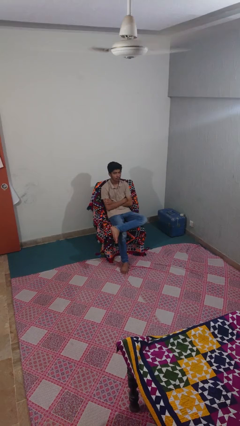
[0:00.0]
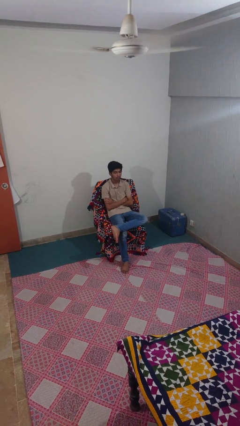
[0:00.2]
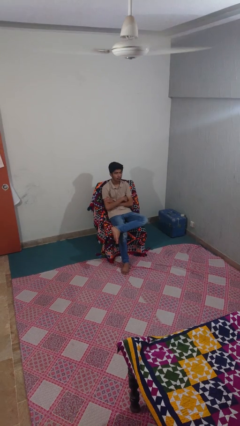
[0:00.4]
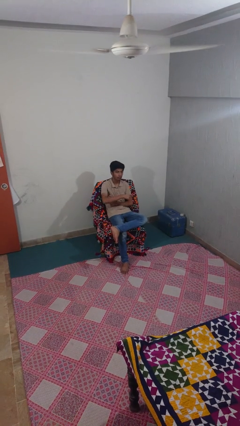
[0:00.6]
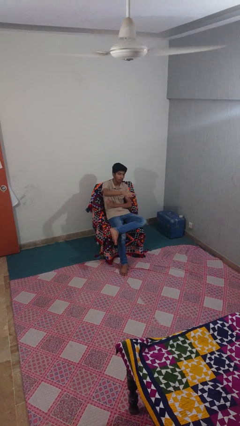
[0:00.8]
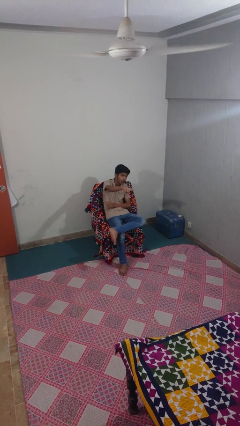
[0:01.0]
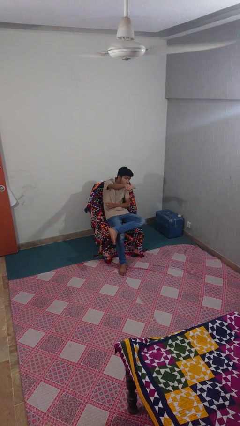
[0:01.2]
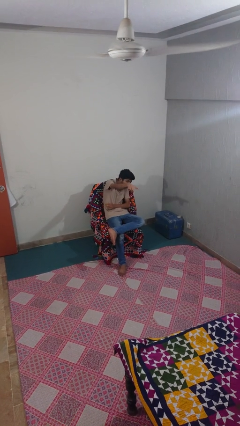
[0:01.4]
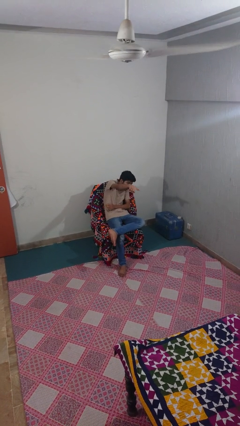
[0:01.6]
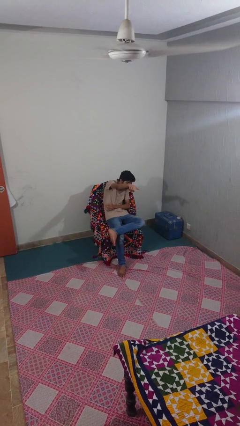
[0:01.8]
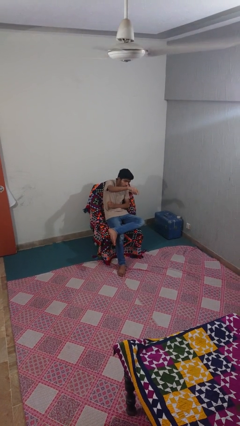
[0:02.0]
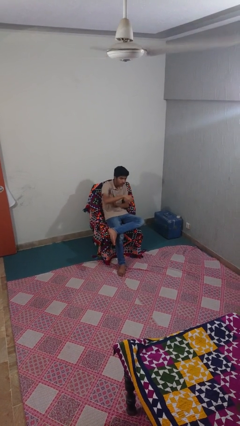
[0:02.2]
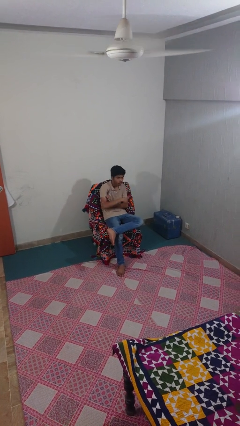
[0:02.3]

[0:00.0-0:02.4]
person points at person

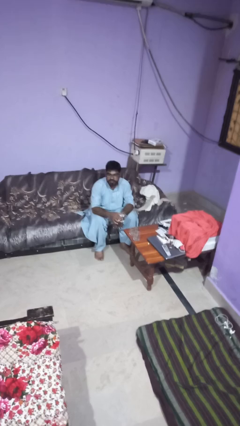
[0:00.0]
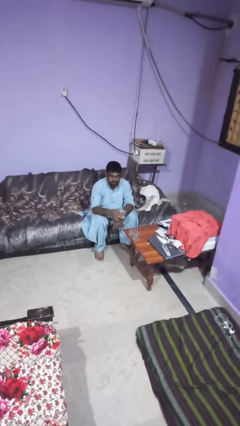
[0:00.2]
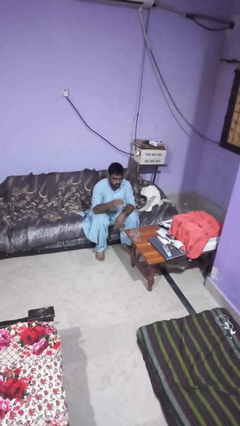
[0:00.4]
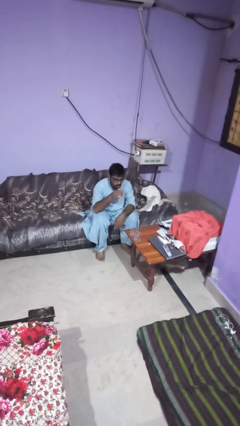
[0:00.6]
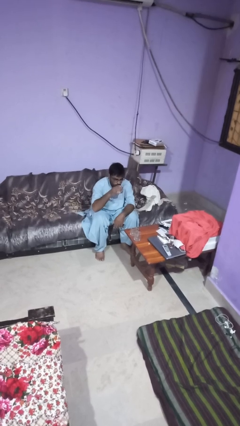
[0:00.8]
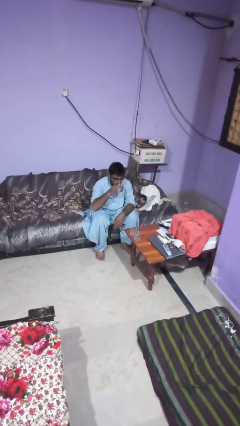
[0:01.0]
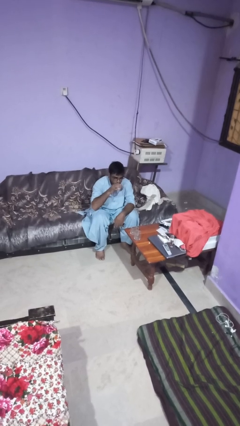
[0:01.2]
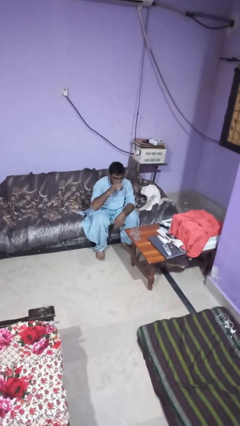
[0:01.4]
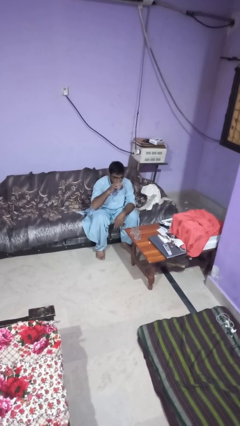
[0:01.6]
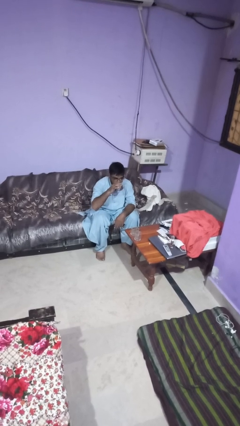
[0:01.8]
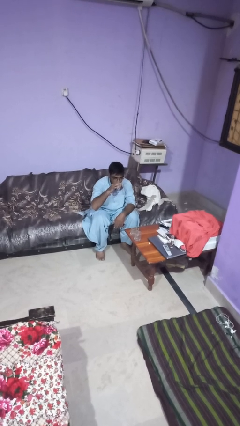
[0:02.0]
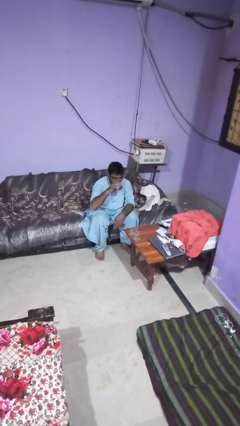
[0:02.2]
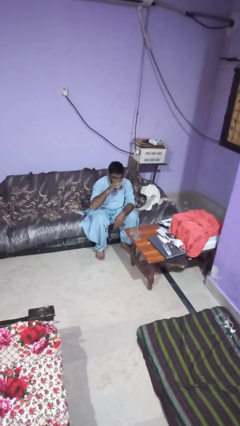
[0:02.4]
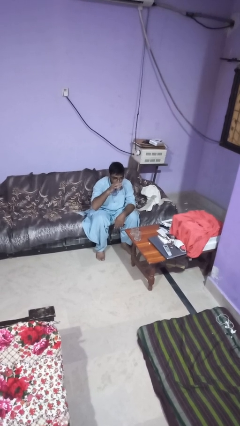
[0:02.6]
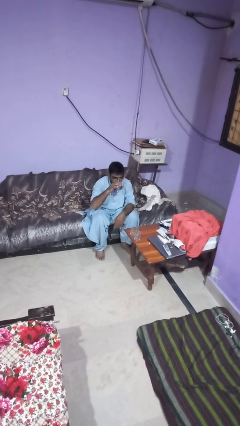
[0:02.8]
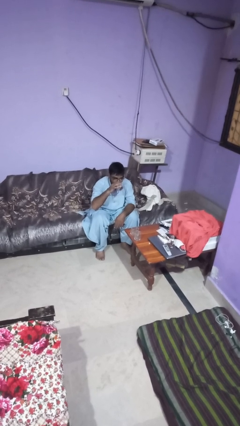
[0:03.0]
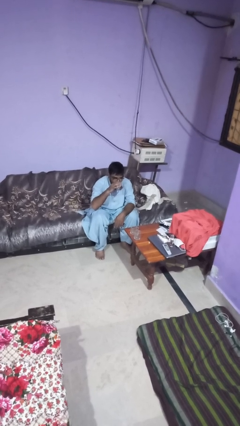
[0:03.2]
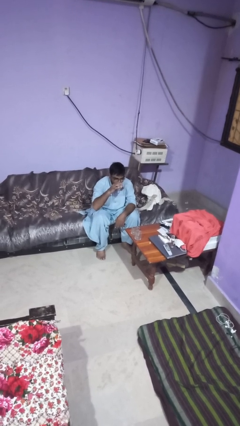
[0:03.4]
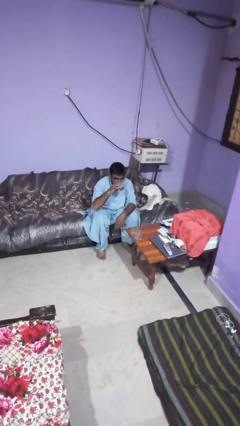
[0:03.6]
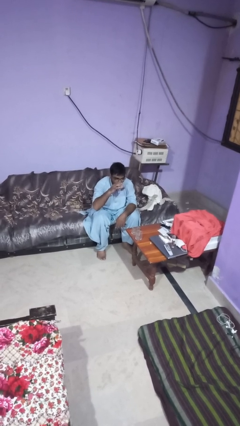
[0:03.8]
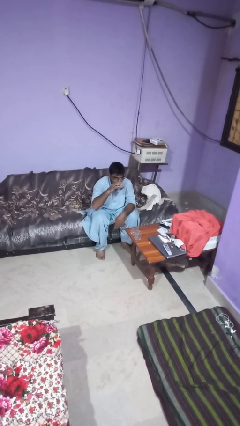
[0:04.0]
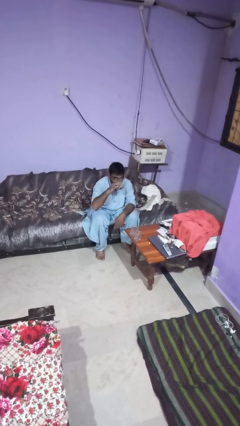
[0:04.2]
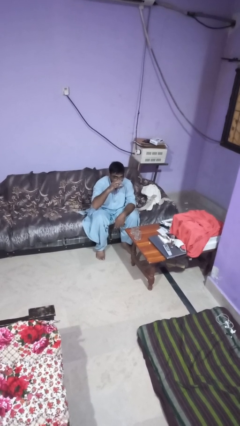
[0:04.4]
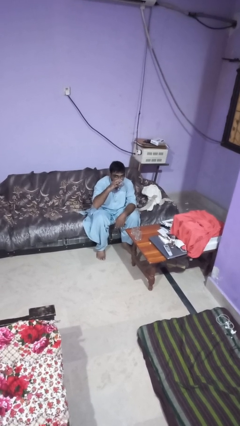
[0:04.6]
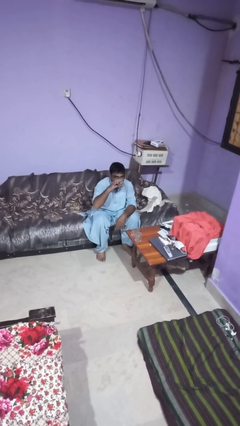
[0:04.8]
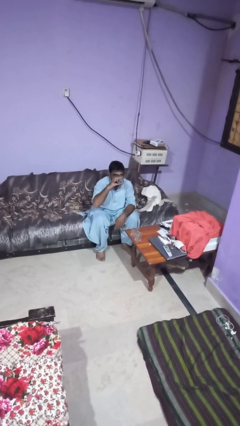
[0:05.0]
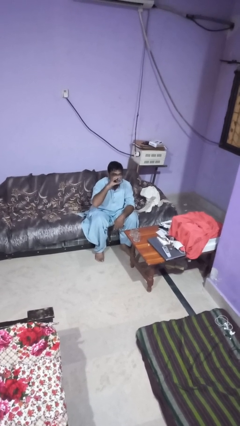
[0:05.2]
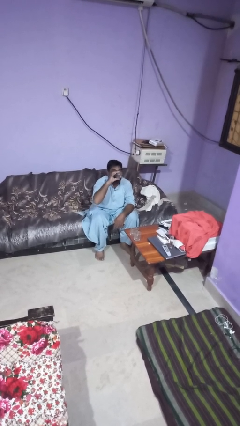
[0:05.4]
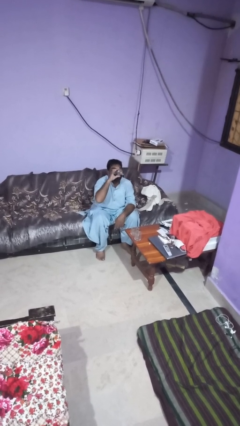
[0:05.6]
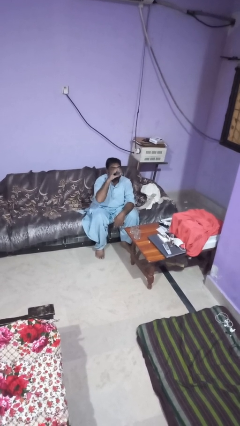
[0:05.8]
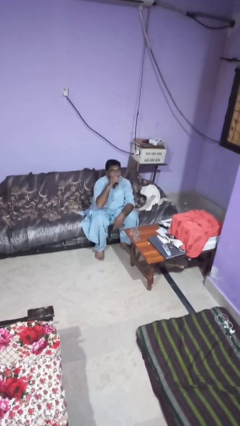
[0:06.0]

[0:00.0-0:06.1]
person drinks from shotglass

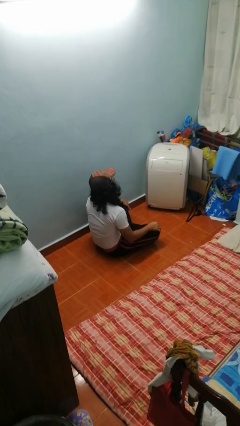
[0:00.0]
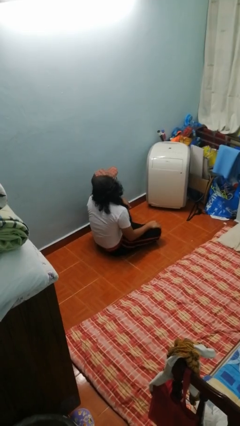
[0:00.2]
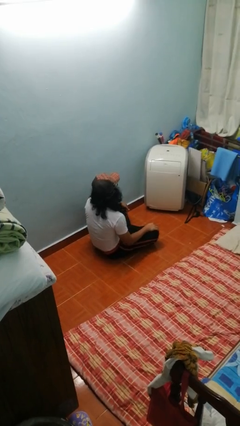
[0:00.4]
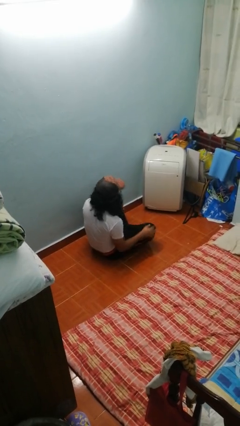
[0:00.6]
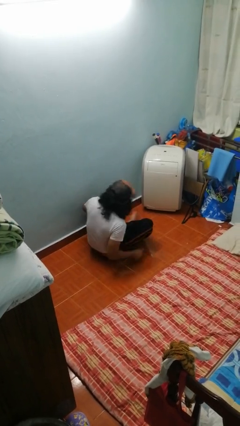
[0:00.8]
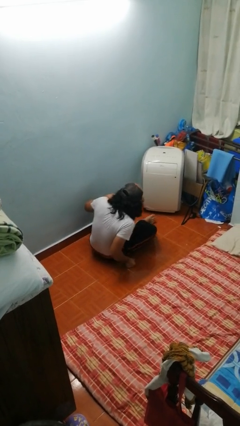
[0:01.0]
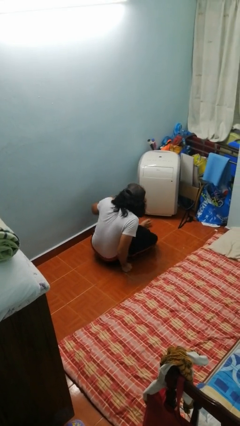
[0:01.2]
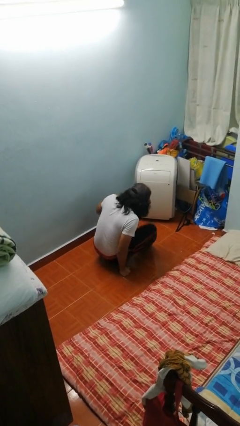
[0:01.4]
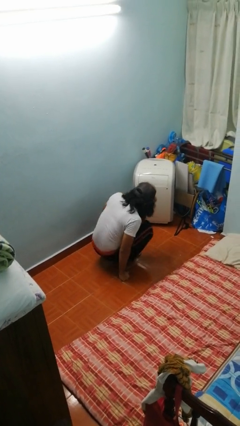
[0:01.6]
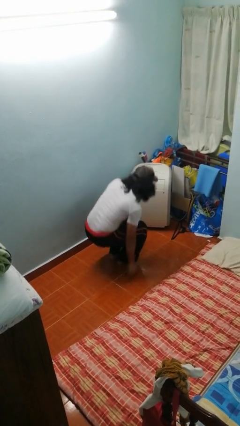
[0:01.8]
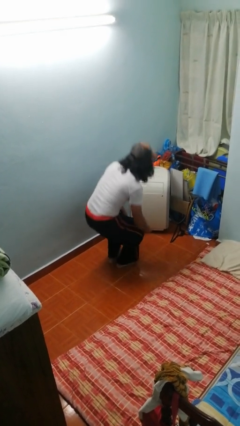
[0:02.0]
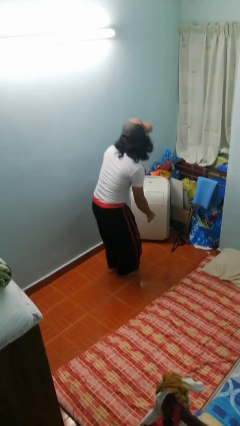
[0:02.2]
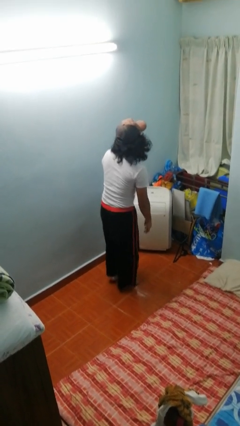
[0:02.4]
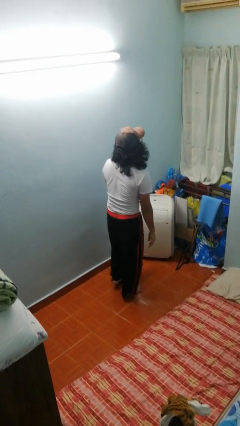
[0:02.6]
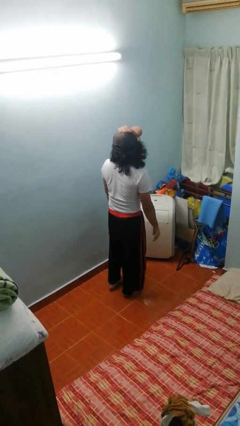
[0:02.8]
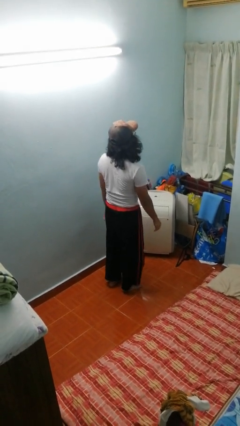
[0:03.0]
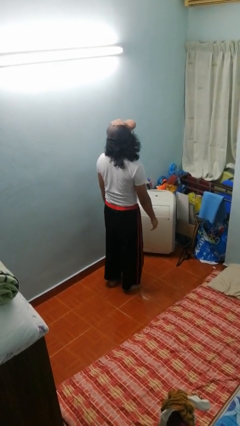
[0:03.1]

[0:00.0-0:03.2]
person stands up from floor

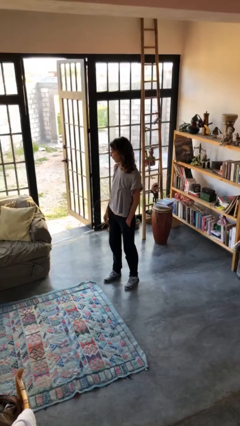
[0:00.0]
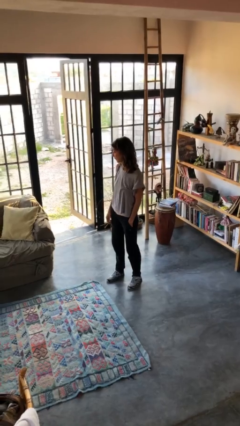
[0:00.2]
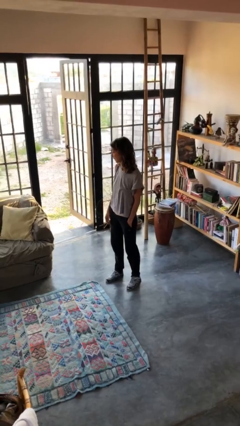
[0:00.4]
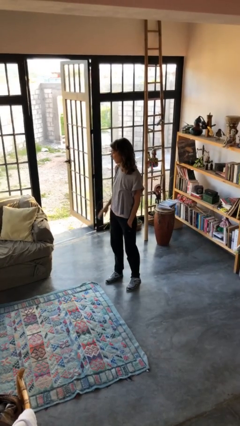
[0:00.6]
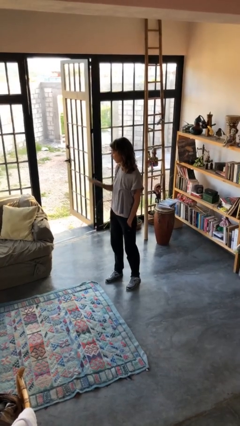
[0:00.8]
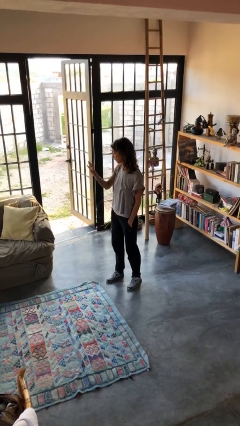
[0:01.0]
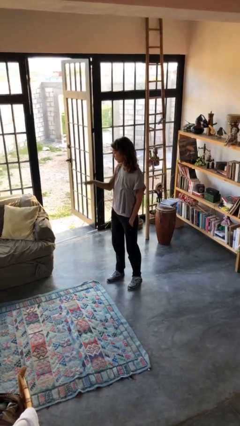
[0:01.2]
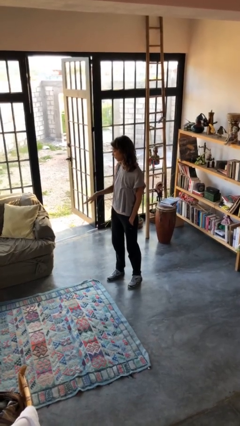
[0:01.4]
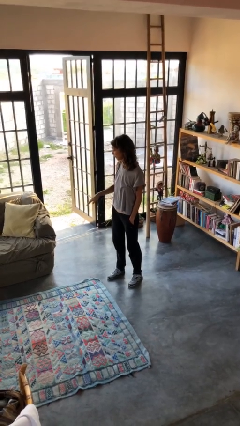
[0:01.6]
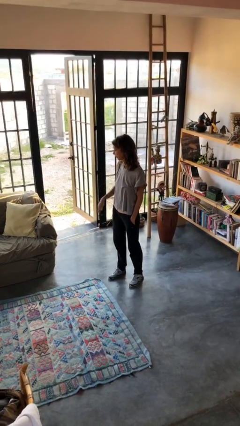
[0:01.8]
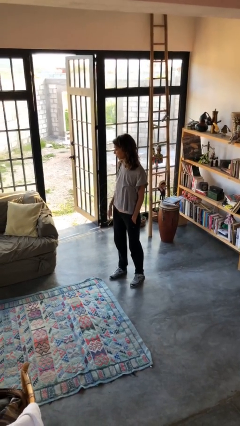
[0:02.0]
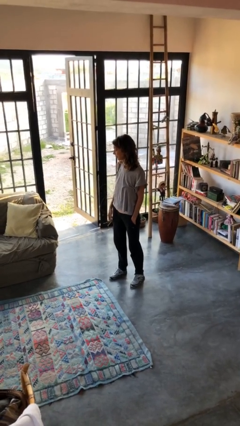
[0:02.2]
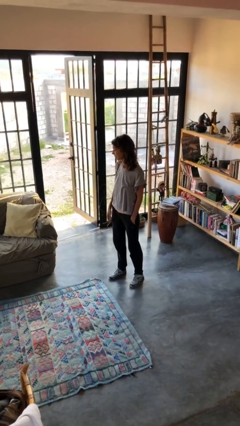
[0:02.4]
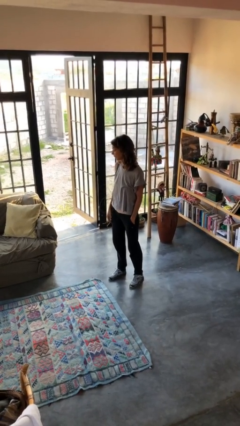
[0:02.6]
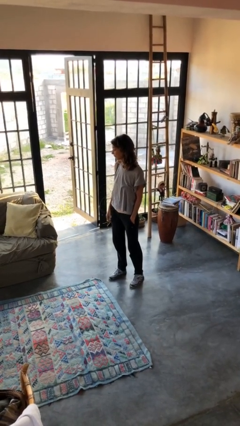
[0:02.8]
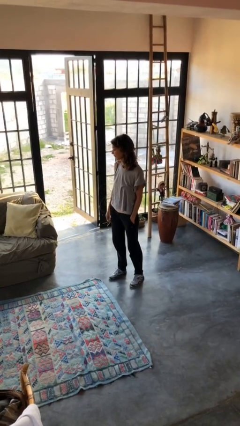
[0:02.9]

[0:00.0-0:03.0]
person gestures swipe down

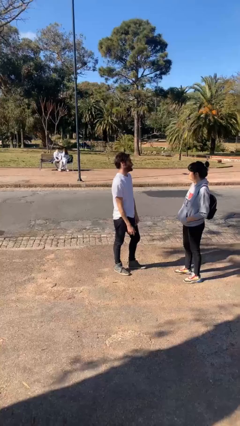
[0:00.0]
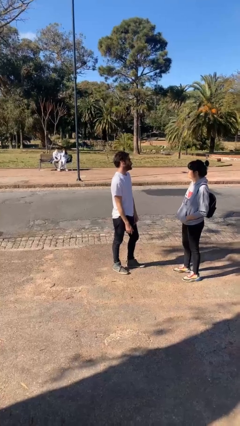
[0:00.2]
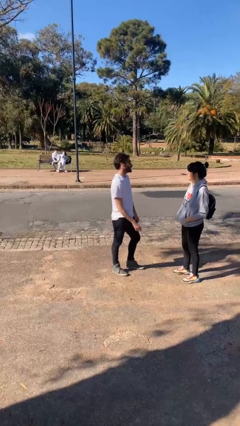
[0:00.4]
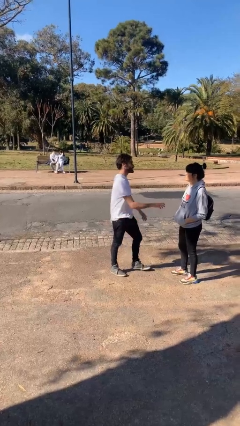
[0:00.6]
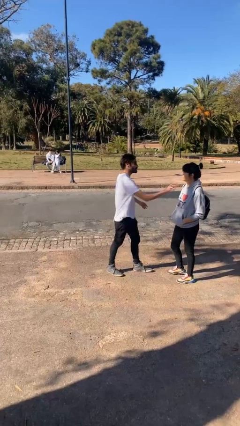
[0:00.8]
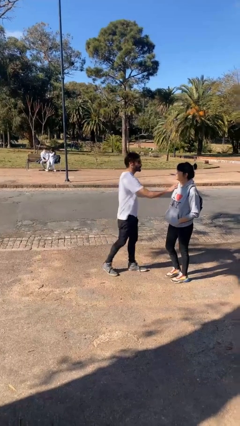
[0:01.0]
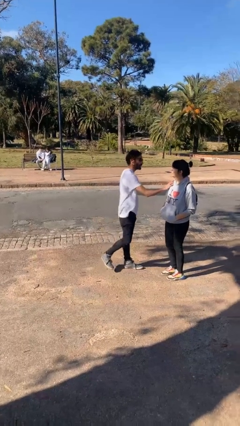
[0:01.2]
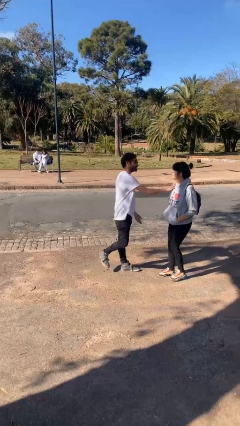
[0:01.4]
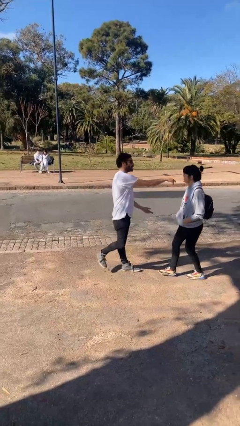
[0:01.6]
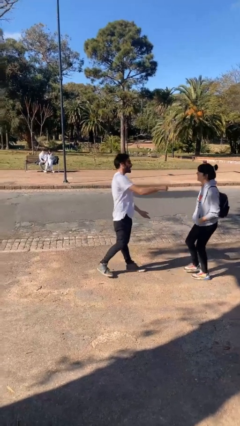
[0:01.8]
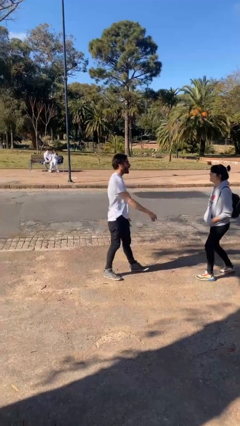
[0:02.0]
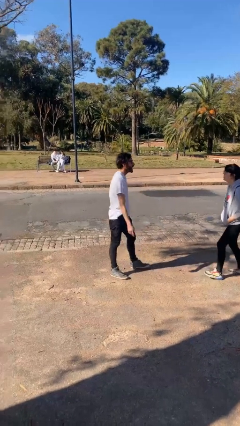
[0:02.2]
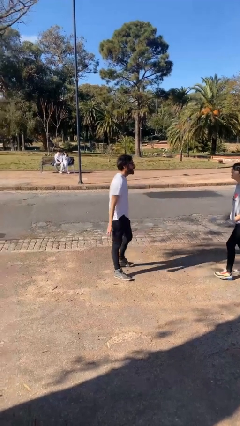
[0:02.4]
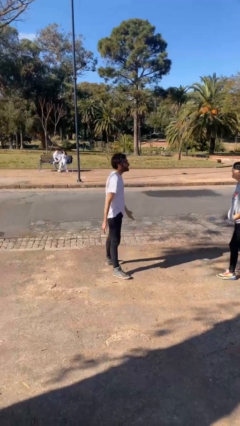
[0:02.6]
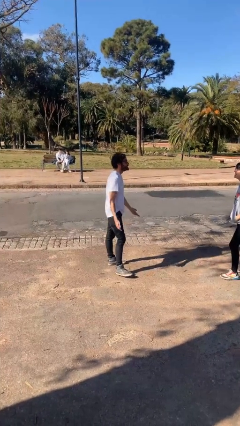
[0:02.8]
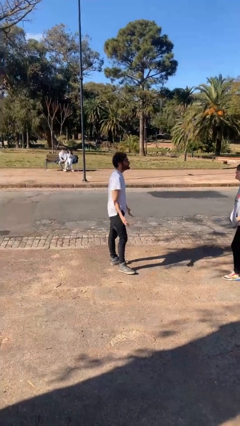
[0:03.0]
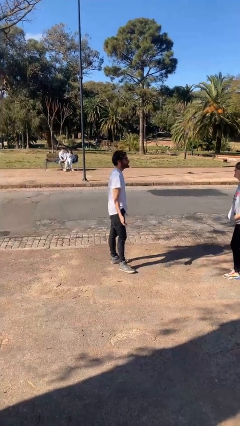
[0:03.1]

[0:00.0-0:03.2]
person shoves person
